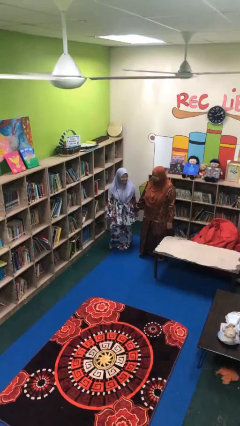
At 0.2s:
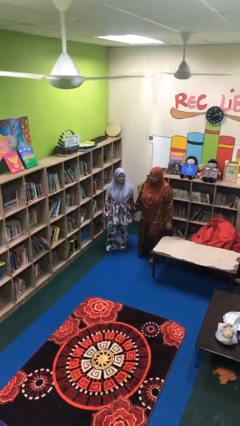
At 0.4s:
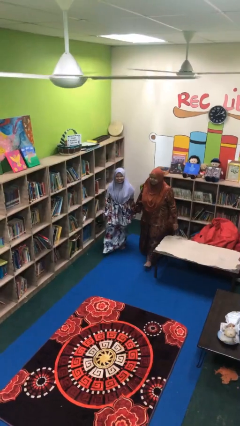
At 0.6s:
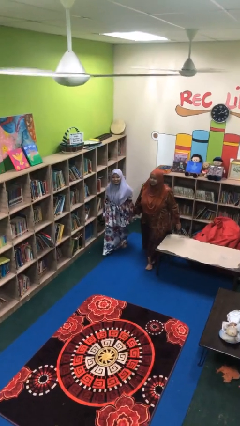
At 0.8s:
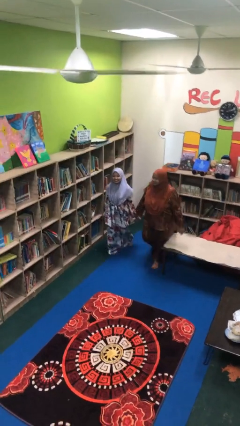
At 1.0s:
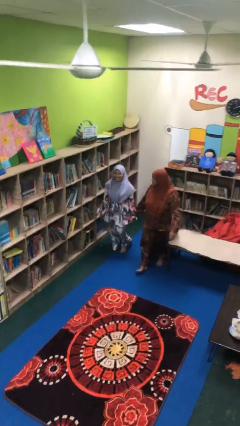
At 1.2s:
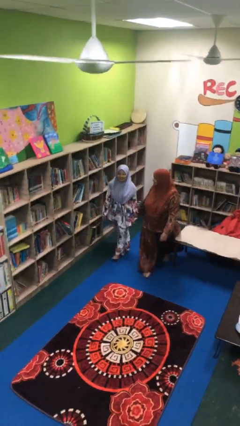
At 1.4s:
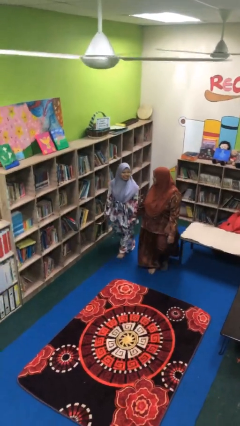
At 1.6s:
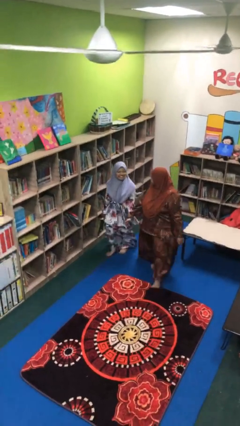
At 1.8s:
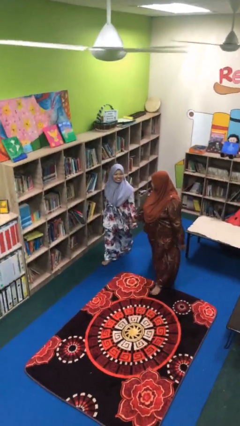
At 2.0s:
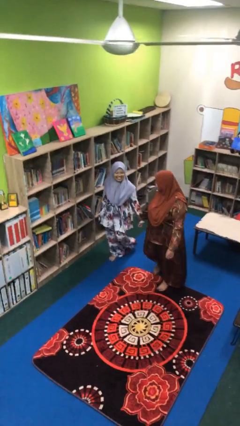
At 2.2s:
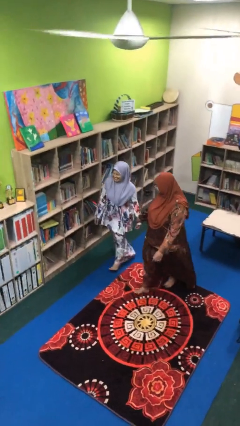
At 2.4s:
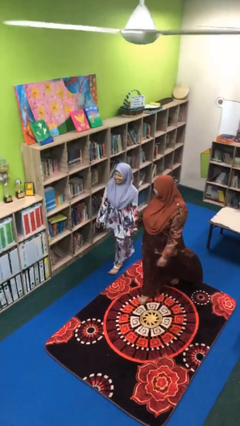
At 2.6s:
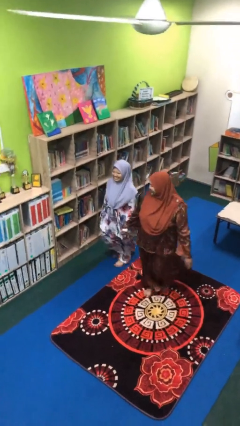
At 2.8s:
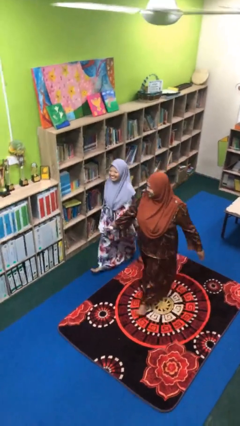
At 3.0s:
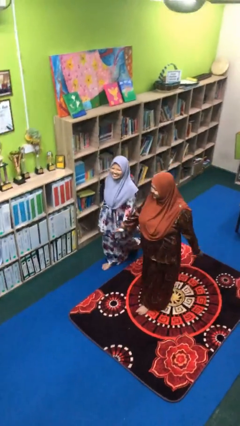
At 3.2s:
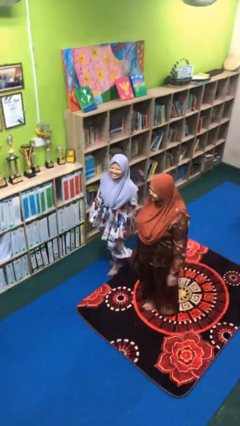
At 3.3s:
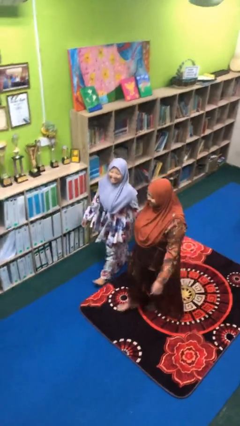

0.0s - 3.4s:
person holds hand

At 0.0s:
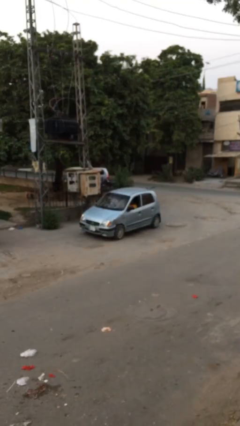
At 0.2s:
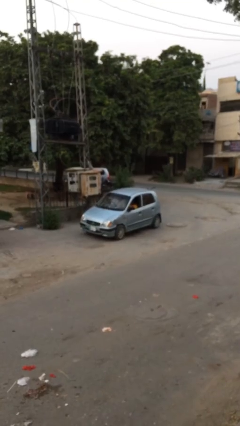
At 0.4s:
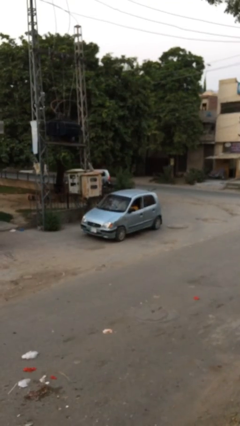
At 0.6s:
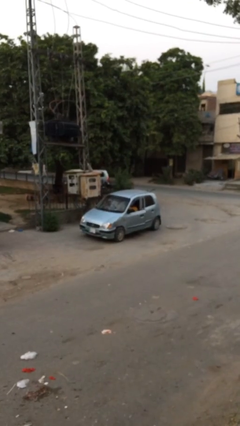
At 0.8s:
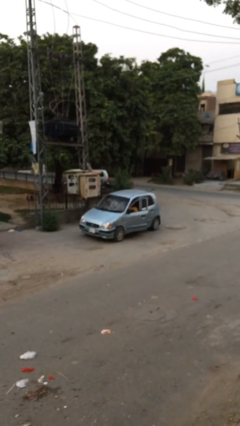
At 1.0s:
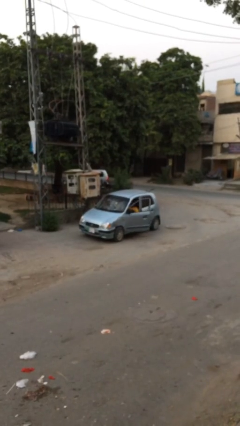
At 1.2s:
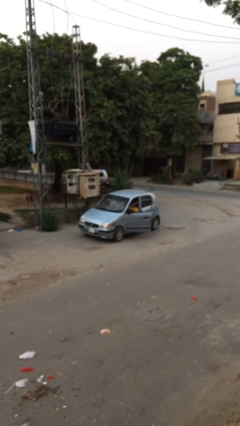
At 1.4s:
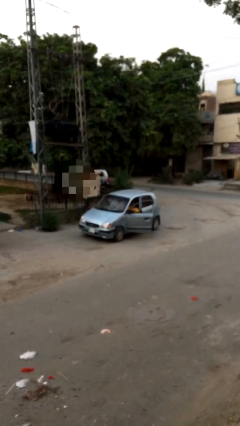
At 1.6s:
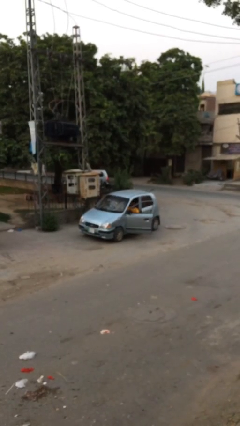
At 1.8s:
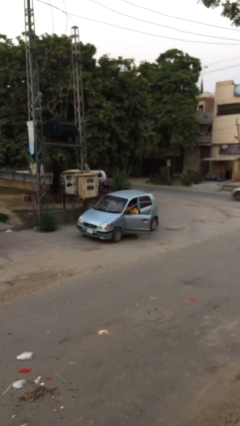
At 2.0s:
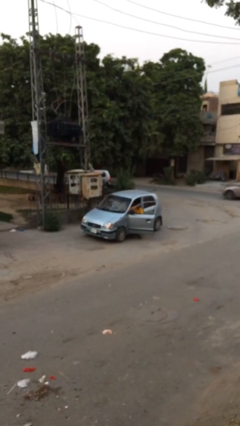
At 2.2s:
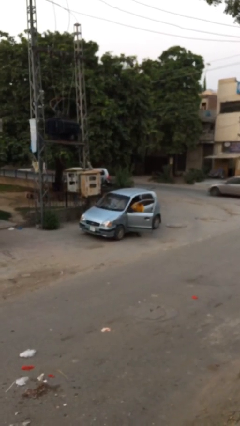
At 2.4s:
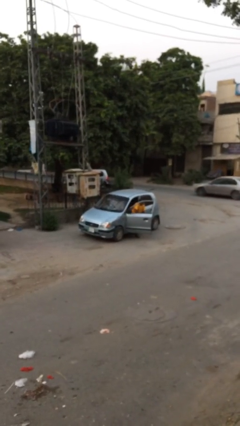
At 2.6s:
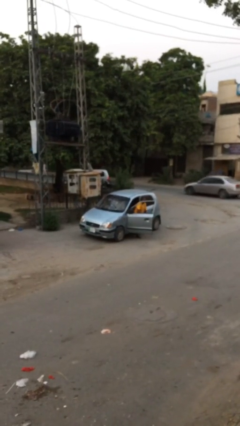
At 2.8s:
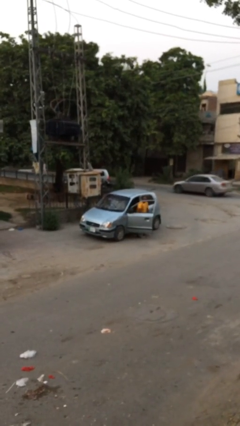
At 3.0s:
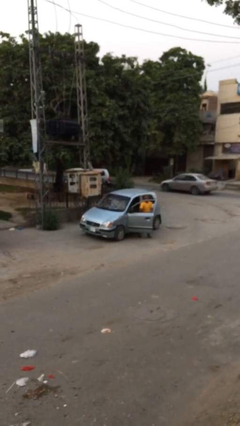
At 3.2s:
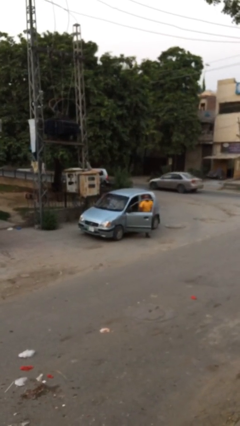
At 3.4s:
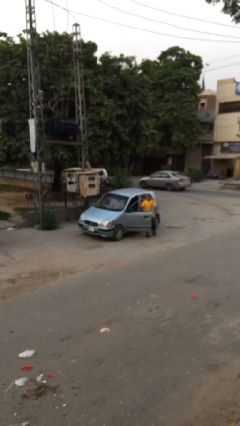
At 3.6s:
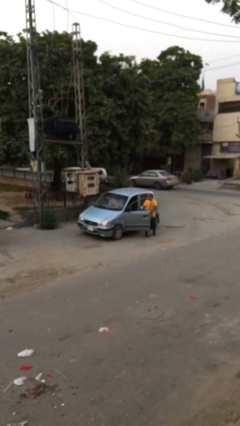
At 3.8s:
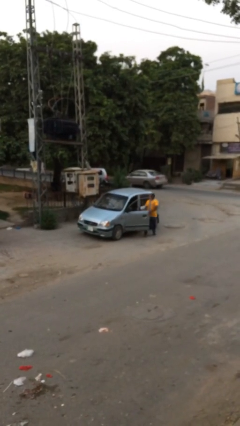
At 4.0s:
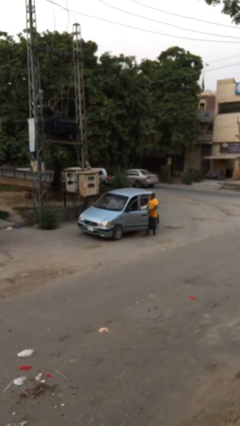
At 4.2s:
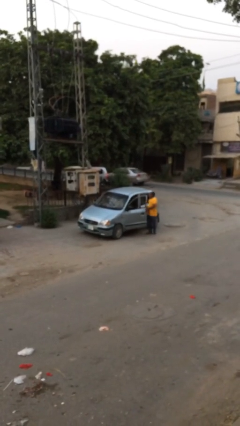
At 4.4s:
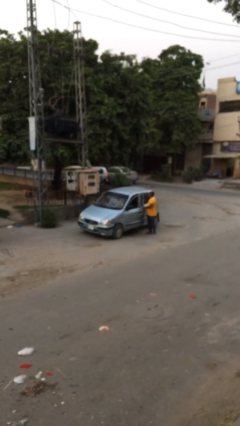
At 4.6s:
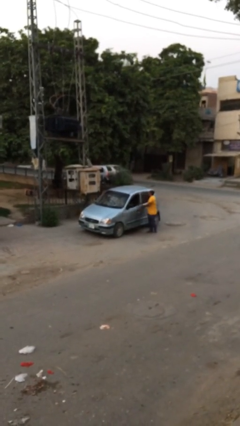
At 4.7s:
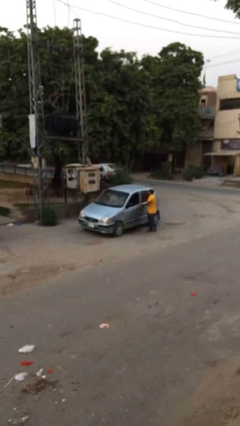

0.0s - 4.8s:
car drops off person

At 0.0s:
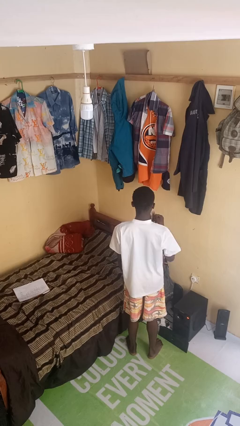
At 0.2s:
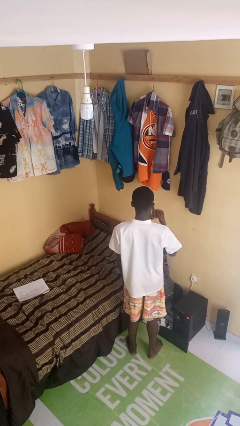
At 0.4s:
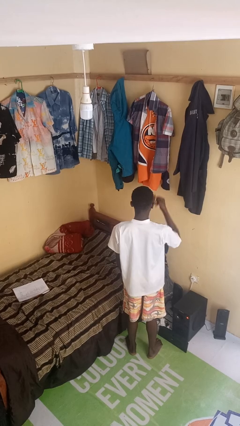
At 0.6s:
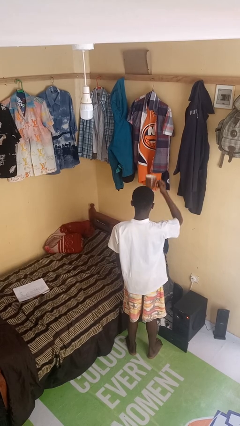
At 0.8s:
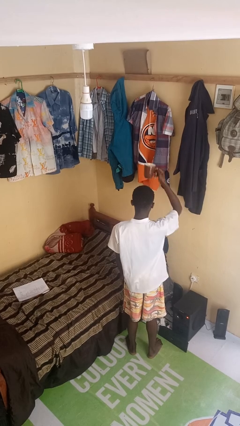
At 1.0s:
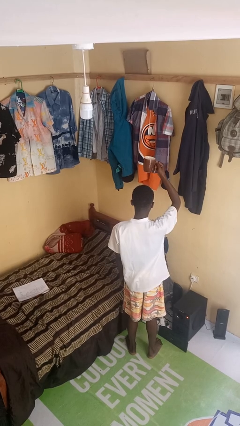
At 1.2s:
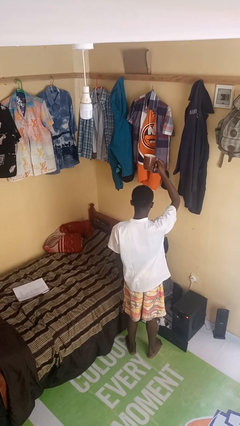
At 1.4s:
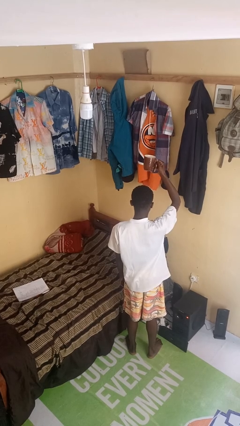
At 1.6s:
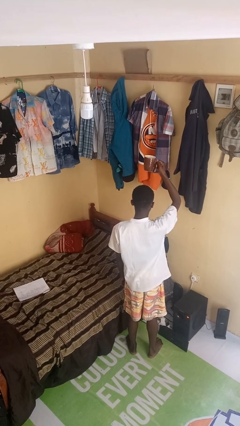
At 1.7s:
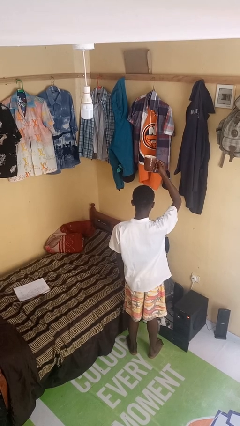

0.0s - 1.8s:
person holds object above head

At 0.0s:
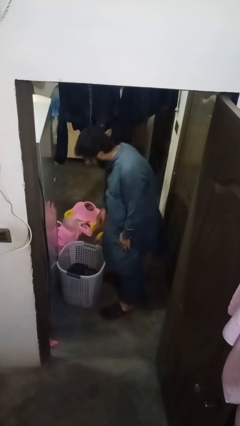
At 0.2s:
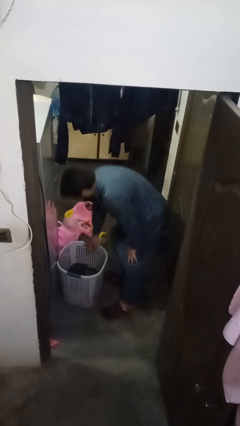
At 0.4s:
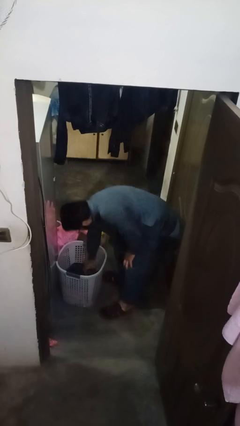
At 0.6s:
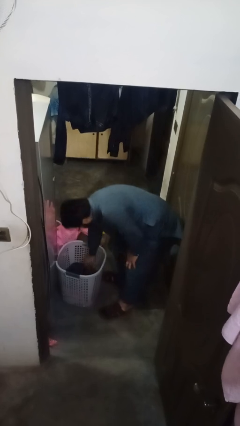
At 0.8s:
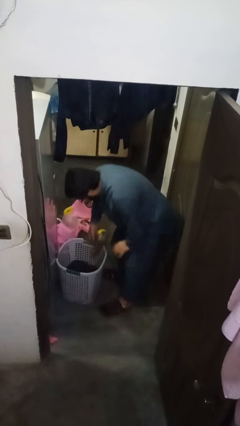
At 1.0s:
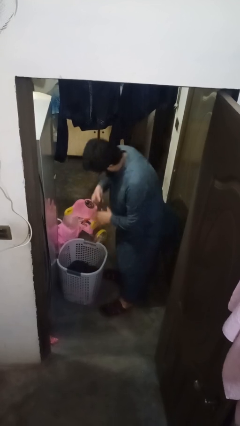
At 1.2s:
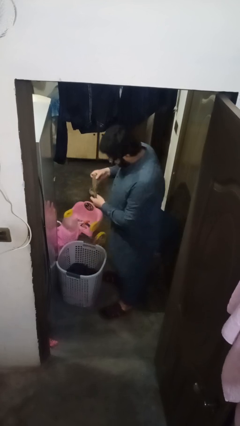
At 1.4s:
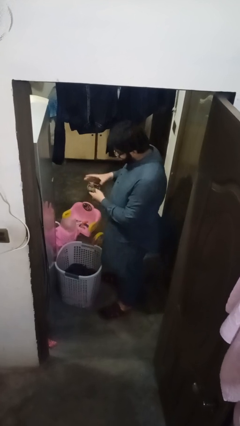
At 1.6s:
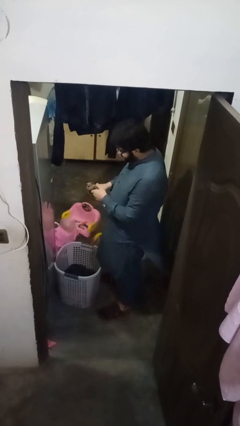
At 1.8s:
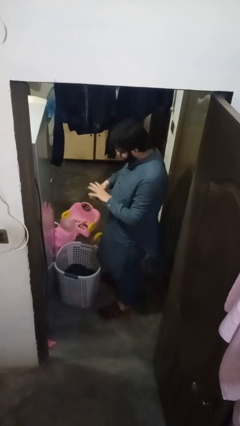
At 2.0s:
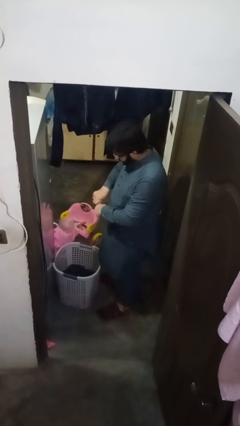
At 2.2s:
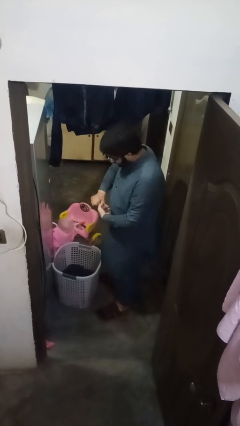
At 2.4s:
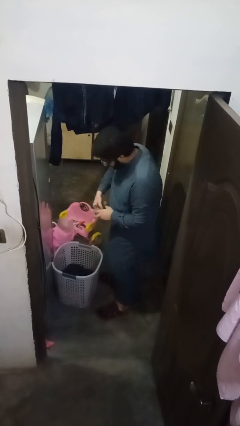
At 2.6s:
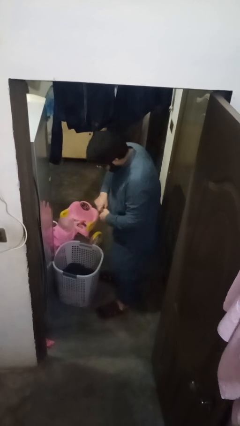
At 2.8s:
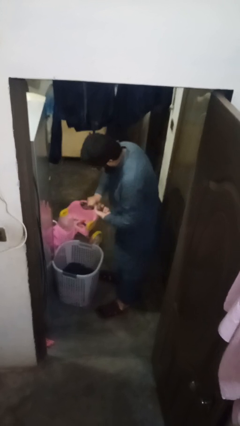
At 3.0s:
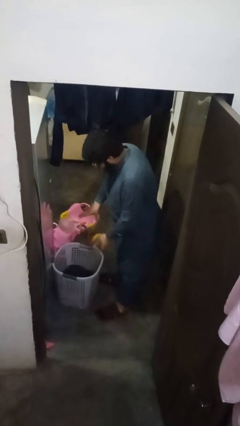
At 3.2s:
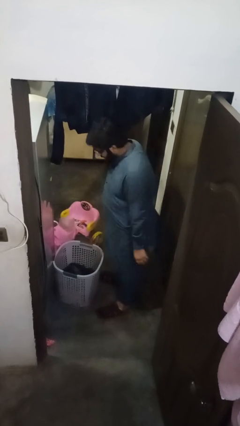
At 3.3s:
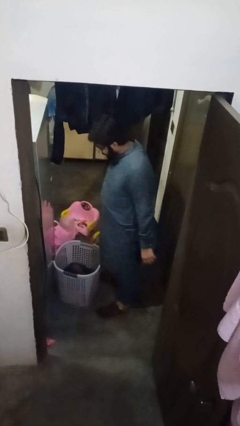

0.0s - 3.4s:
person folds socks

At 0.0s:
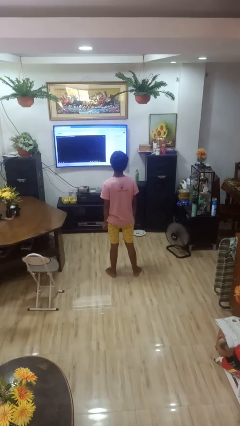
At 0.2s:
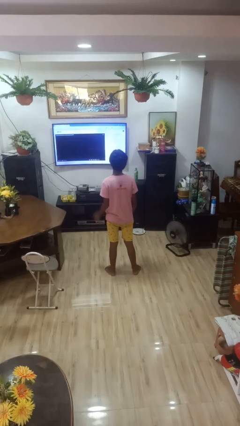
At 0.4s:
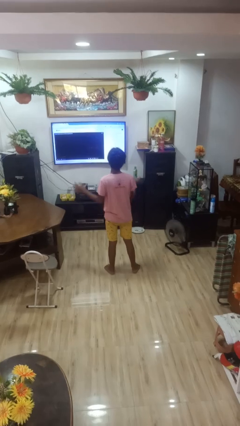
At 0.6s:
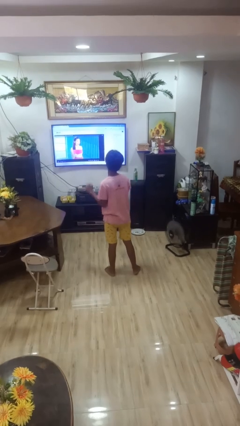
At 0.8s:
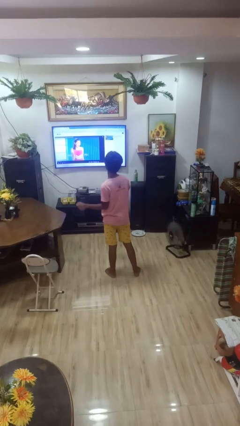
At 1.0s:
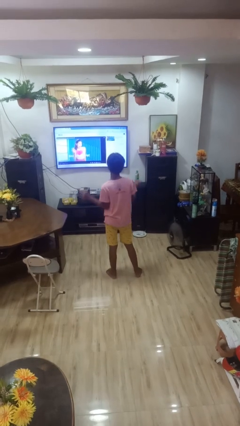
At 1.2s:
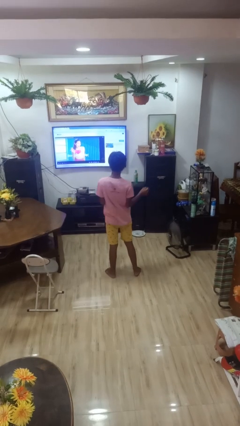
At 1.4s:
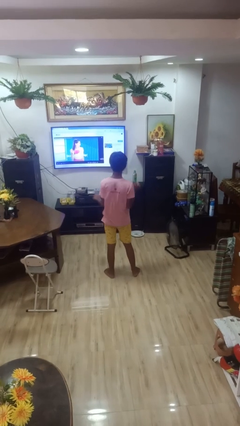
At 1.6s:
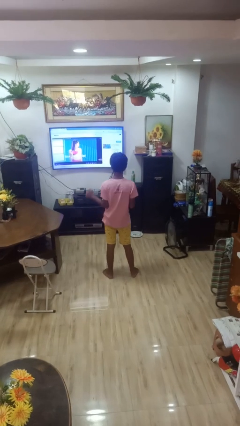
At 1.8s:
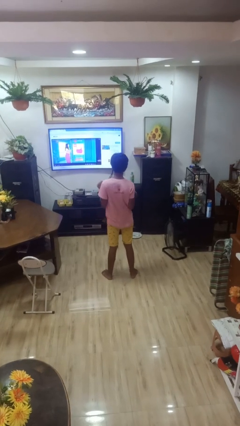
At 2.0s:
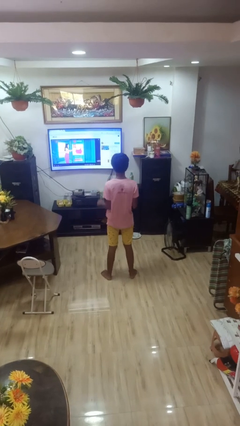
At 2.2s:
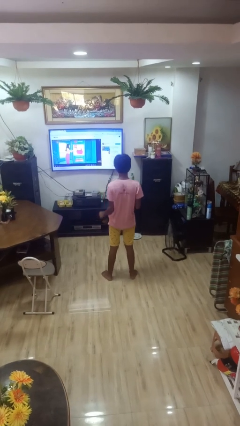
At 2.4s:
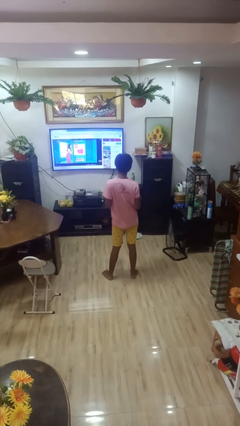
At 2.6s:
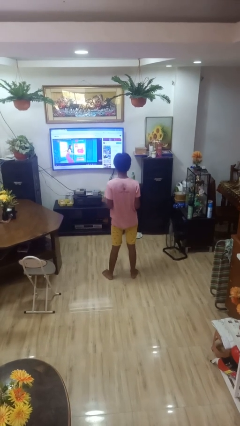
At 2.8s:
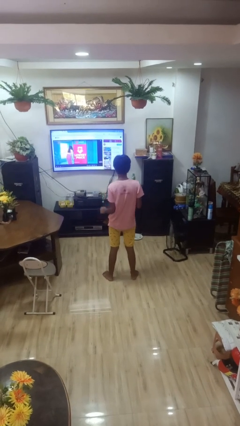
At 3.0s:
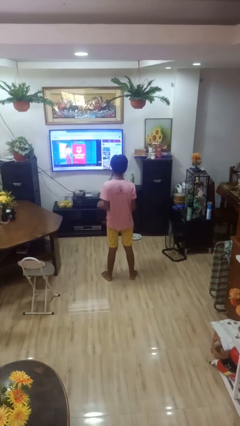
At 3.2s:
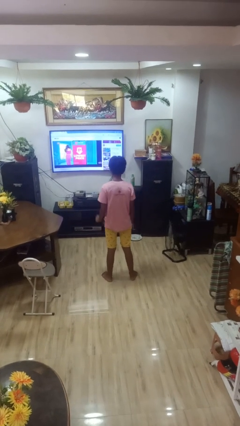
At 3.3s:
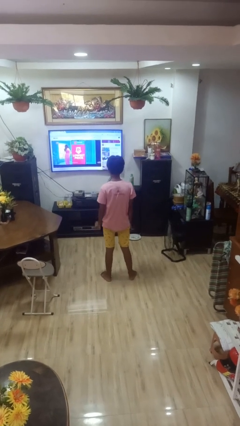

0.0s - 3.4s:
person dances in place

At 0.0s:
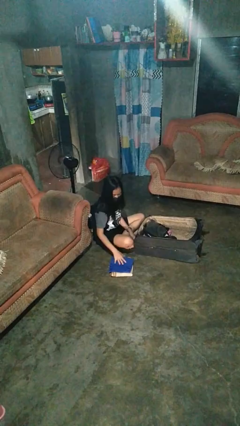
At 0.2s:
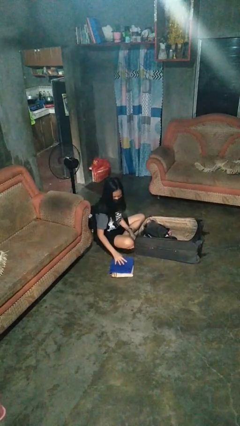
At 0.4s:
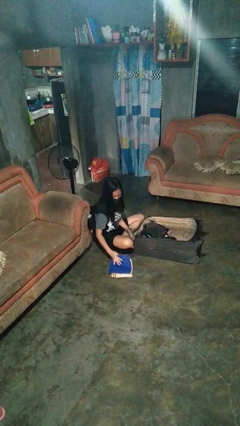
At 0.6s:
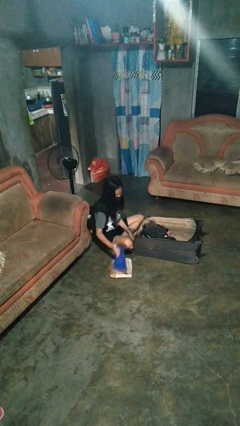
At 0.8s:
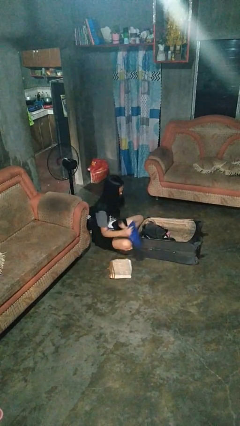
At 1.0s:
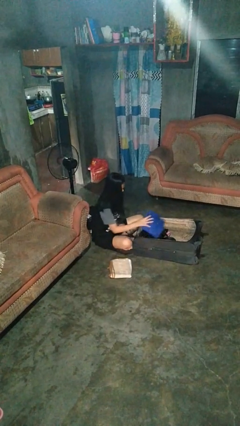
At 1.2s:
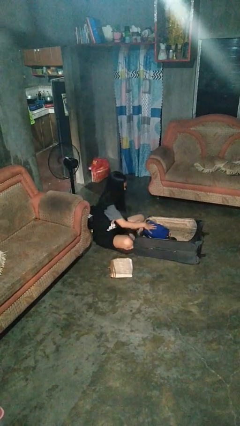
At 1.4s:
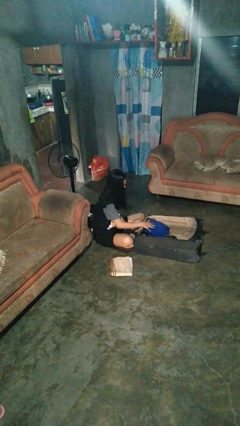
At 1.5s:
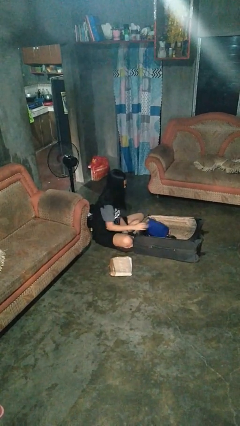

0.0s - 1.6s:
person loads clothes into suitcase
